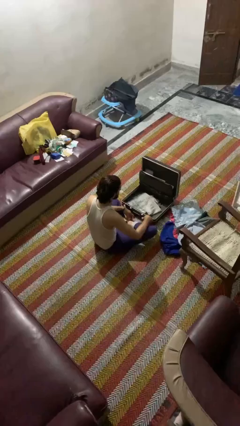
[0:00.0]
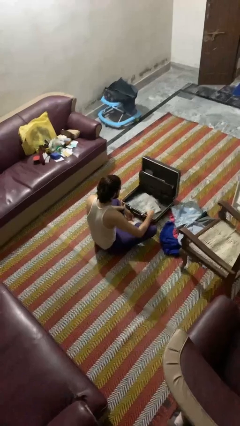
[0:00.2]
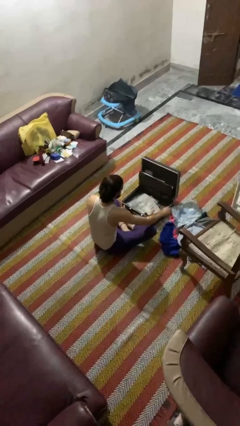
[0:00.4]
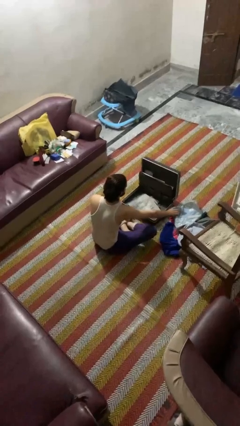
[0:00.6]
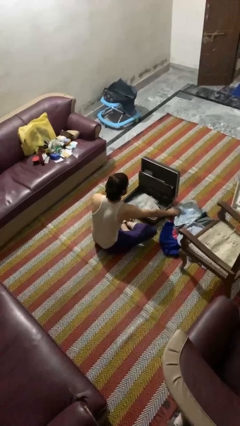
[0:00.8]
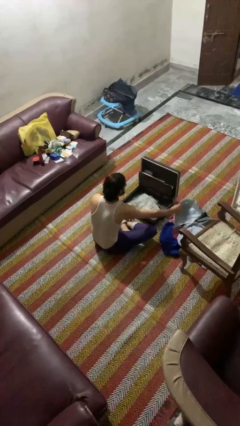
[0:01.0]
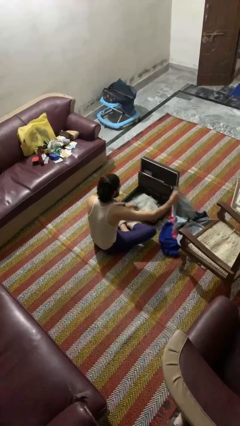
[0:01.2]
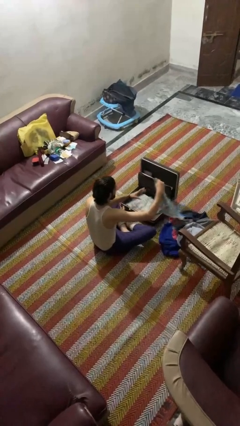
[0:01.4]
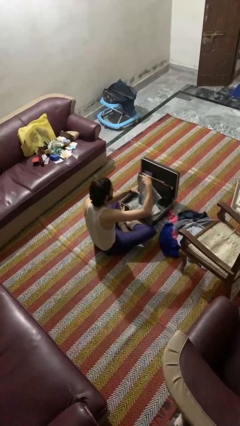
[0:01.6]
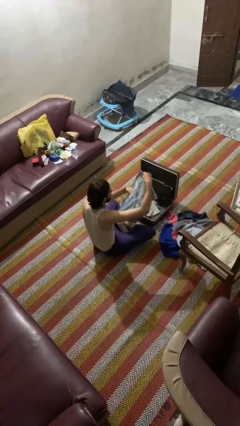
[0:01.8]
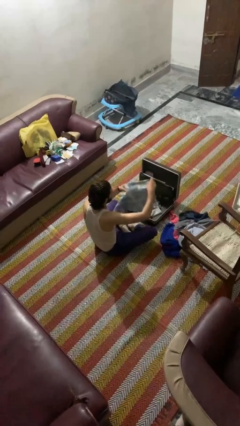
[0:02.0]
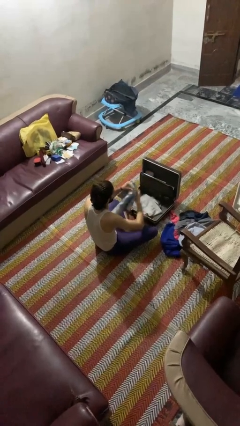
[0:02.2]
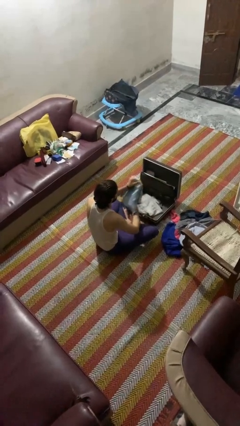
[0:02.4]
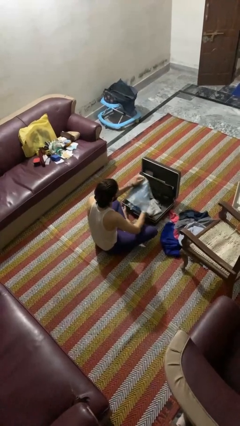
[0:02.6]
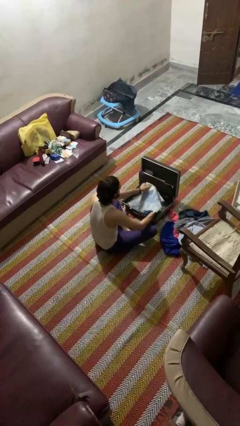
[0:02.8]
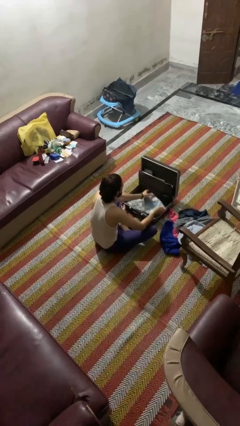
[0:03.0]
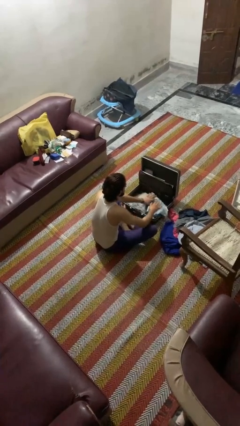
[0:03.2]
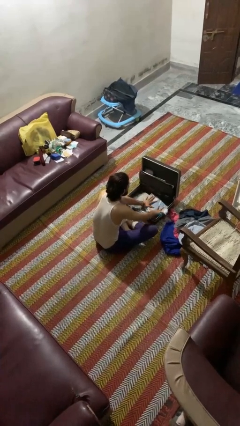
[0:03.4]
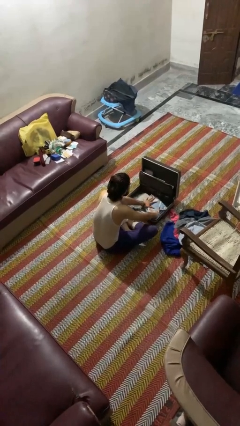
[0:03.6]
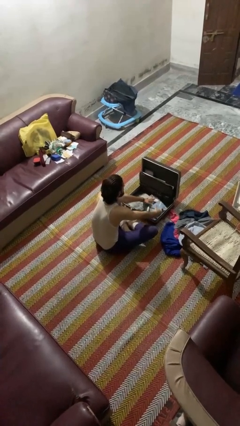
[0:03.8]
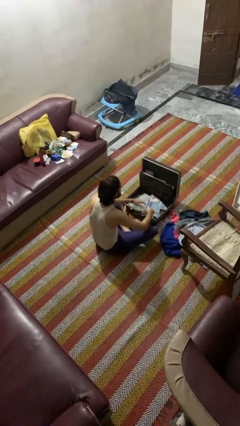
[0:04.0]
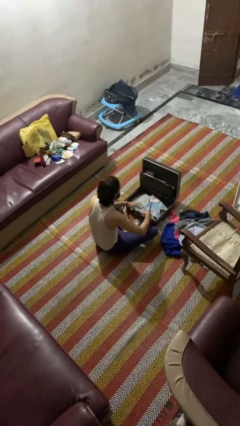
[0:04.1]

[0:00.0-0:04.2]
person loads clothes into suitcase

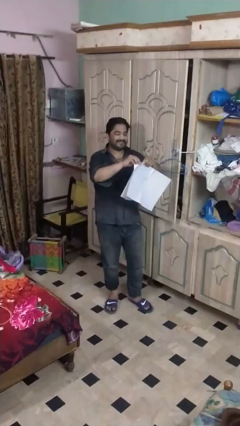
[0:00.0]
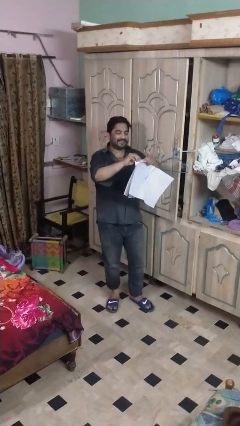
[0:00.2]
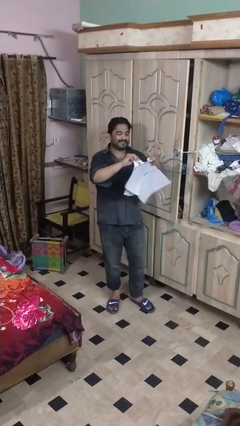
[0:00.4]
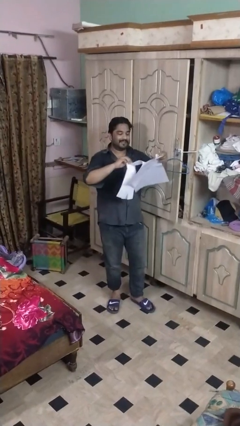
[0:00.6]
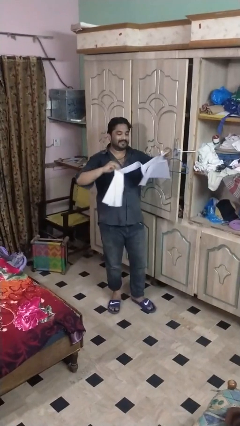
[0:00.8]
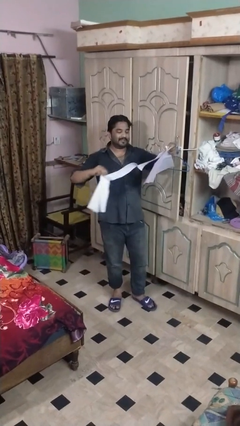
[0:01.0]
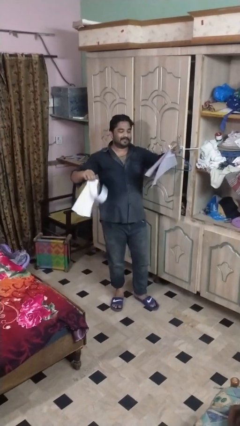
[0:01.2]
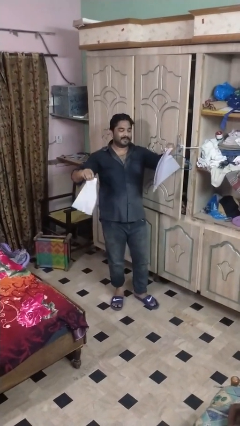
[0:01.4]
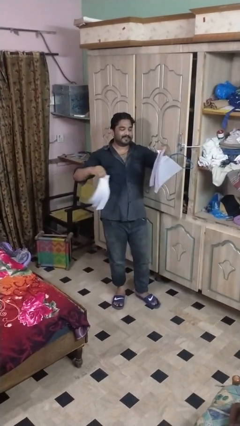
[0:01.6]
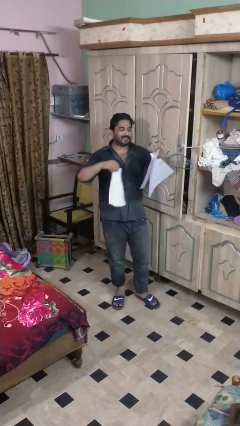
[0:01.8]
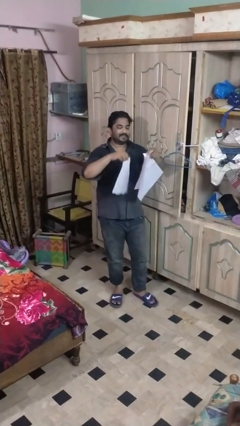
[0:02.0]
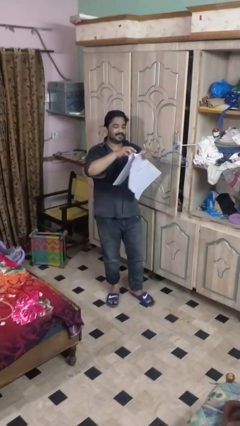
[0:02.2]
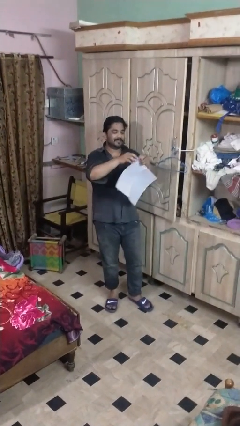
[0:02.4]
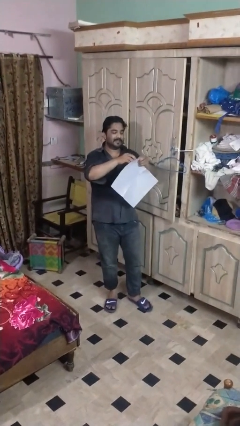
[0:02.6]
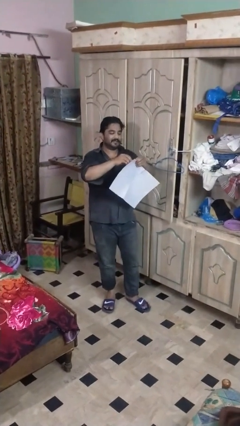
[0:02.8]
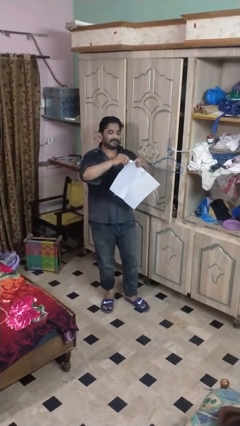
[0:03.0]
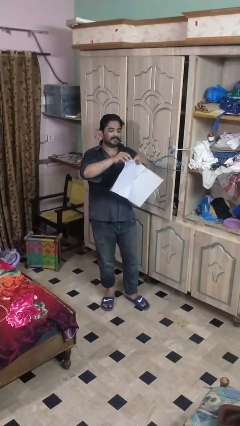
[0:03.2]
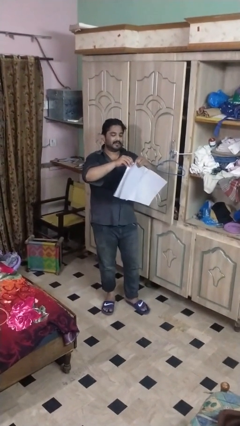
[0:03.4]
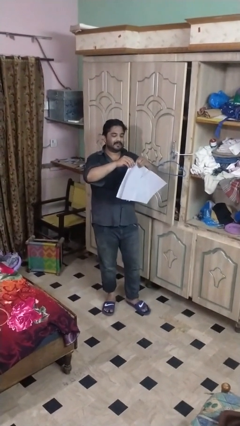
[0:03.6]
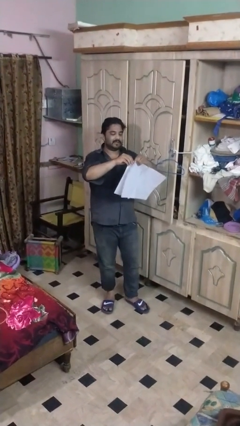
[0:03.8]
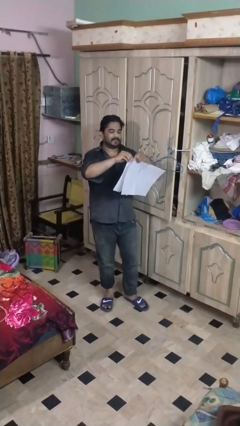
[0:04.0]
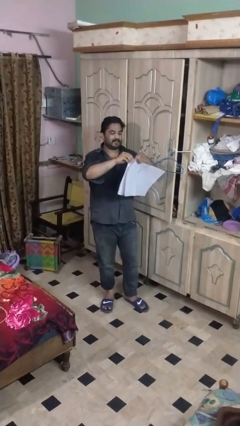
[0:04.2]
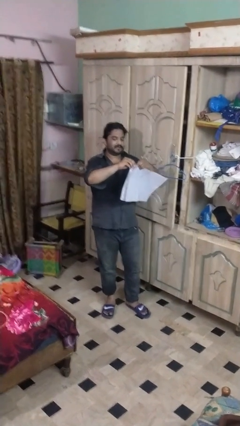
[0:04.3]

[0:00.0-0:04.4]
person tears paper

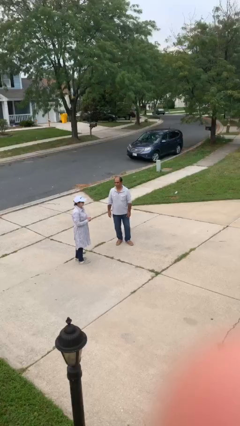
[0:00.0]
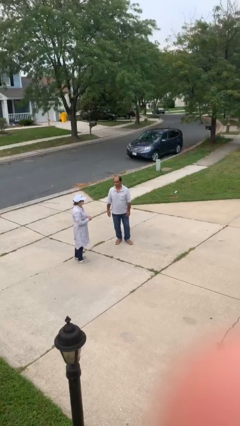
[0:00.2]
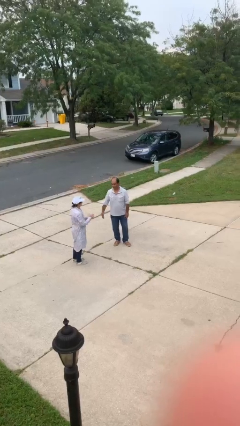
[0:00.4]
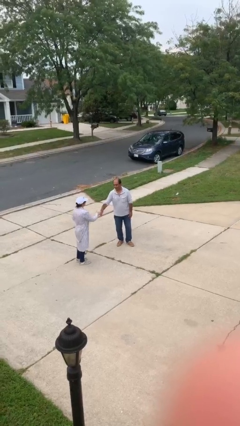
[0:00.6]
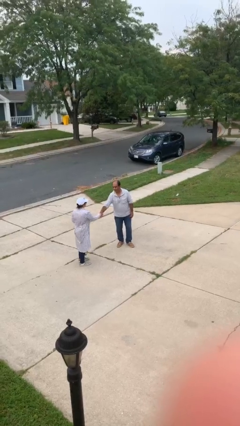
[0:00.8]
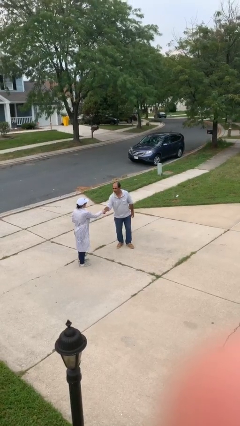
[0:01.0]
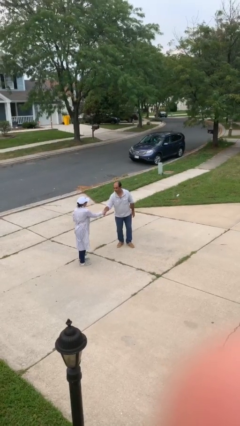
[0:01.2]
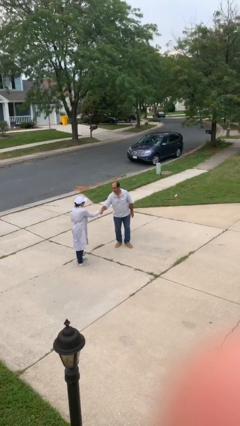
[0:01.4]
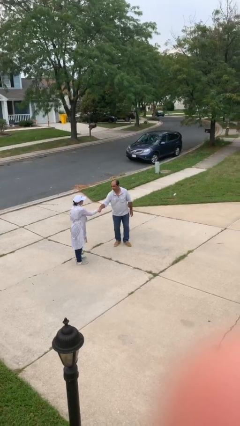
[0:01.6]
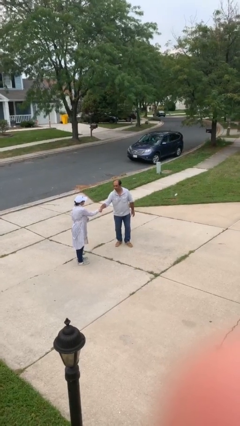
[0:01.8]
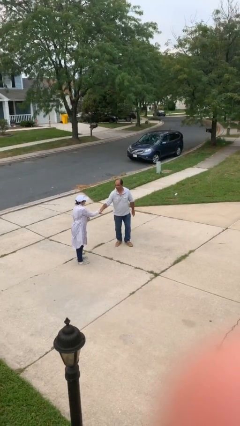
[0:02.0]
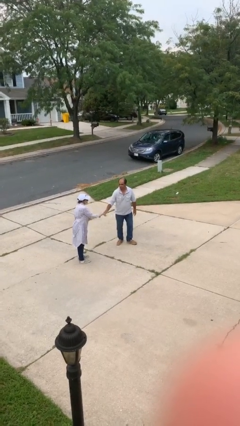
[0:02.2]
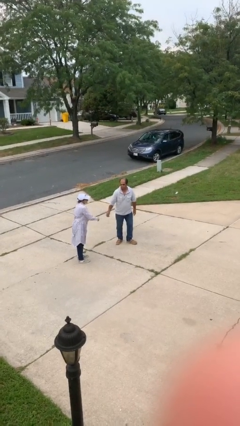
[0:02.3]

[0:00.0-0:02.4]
person shakes hand

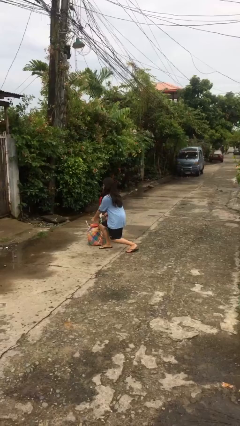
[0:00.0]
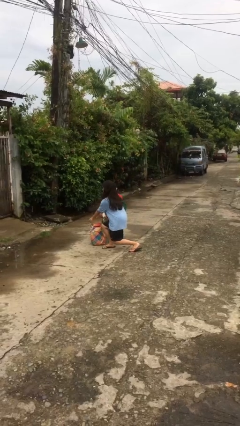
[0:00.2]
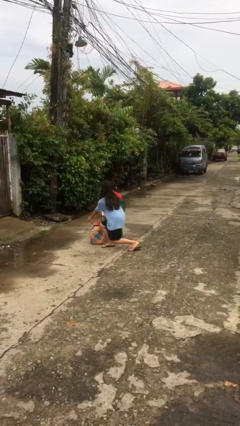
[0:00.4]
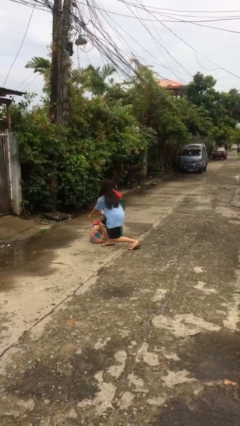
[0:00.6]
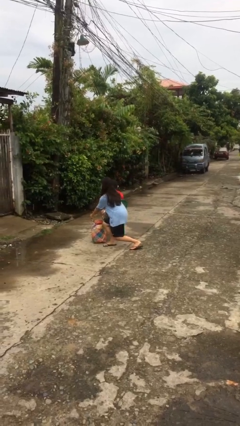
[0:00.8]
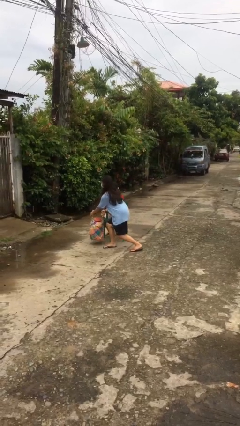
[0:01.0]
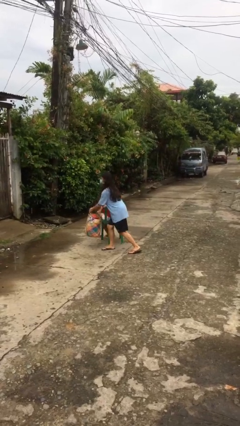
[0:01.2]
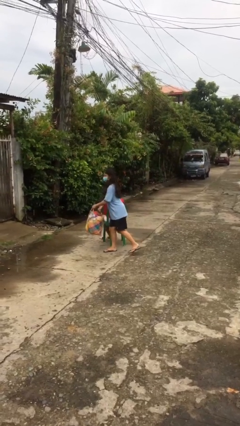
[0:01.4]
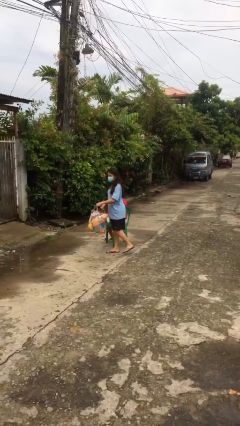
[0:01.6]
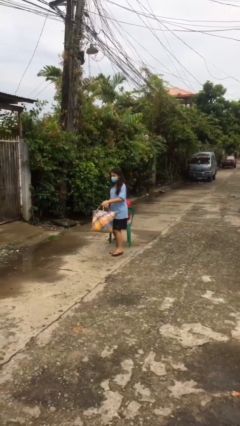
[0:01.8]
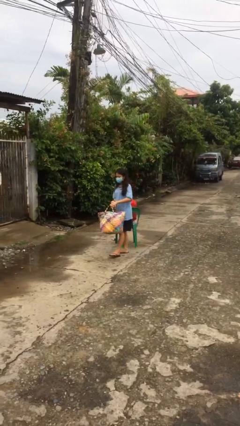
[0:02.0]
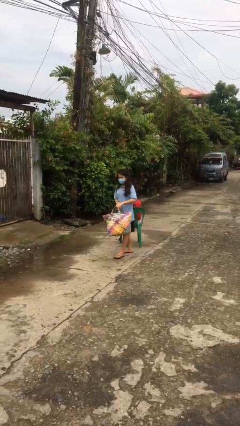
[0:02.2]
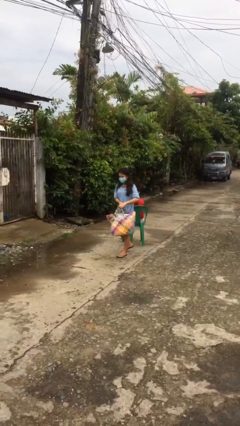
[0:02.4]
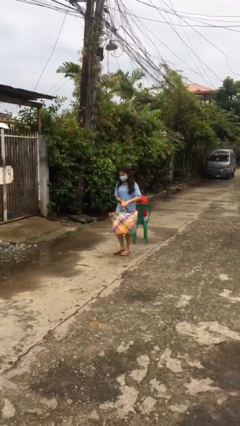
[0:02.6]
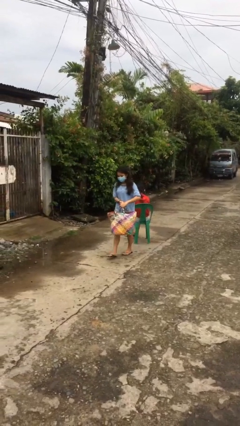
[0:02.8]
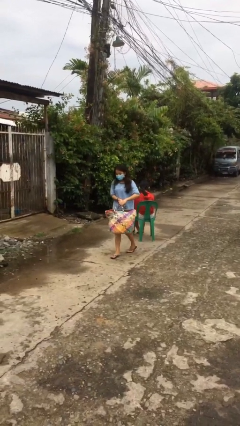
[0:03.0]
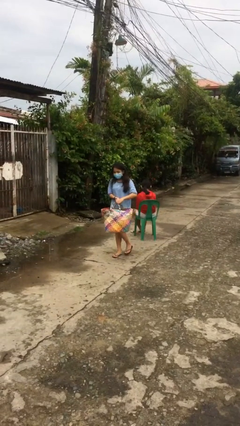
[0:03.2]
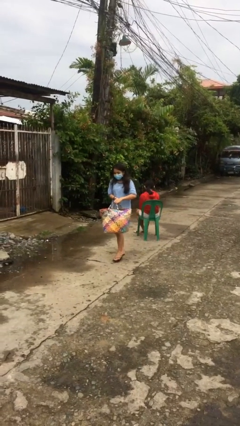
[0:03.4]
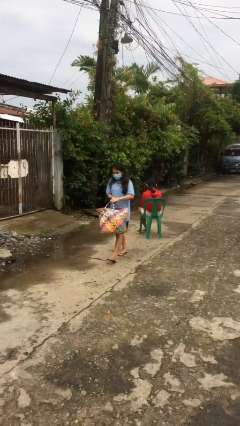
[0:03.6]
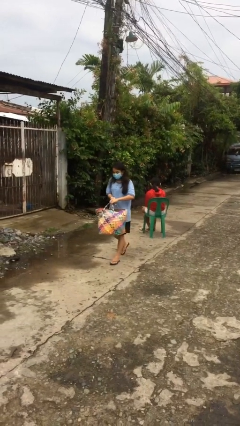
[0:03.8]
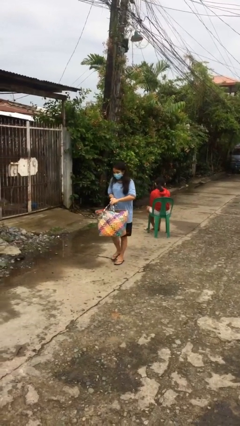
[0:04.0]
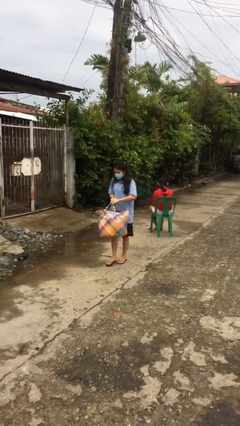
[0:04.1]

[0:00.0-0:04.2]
person steals object from person

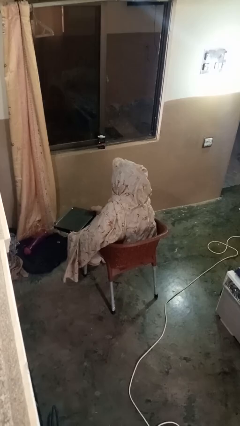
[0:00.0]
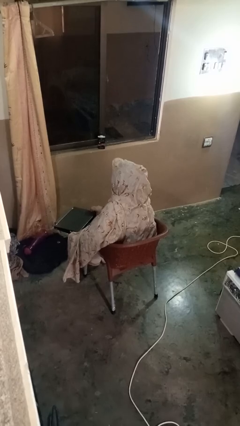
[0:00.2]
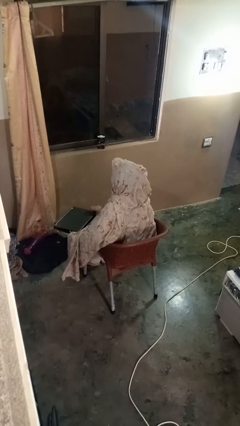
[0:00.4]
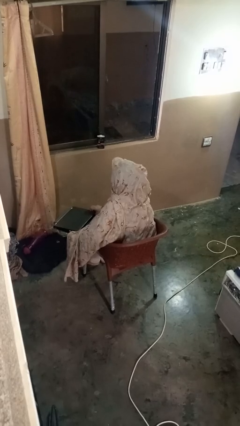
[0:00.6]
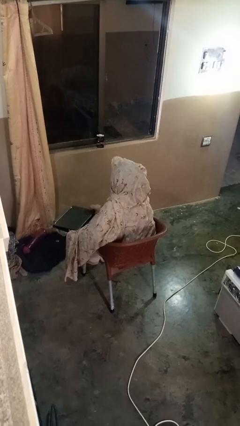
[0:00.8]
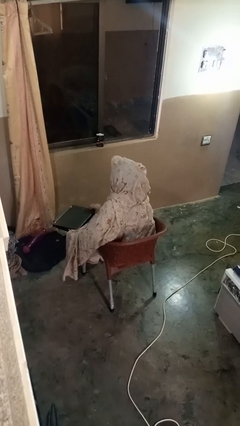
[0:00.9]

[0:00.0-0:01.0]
person closes laptop

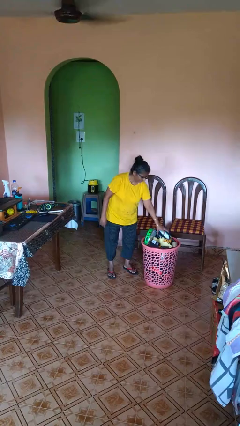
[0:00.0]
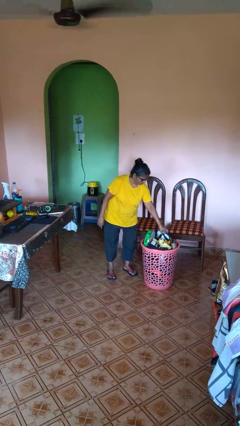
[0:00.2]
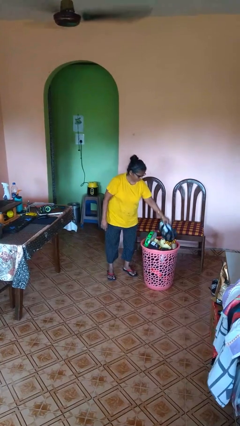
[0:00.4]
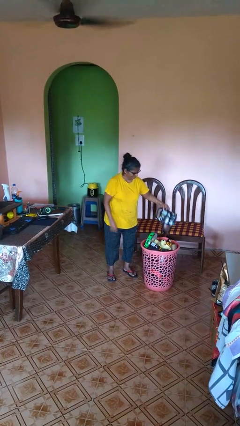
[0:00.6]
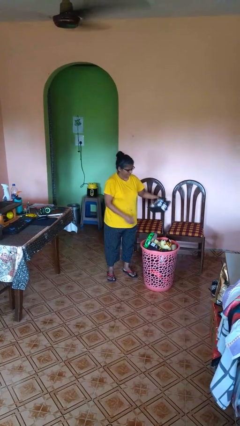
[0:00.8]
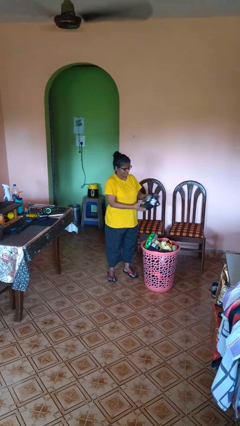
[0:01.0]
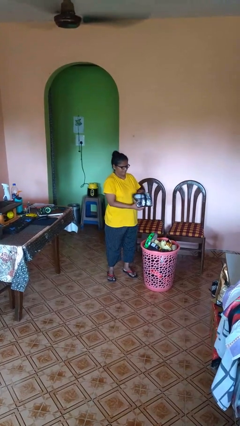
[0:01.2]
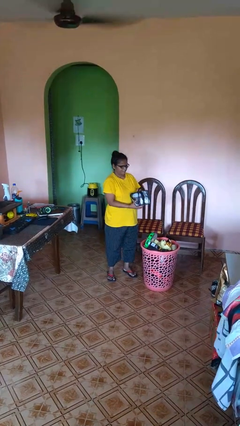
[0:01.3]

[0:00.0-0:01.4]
person takes object from basket
